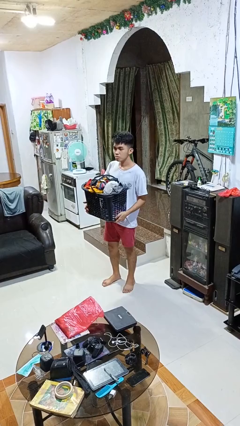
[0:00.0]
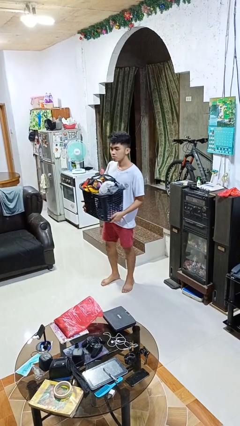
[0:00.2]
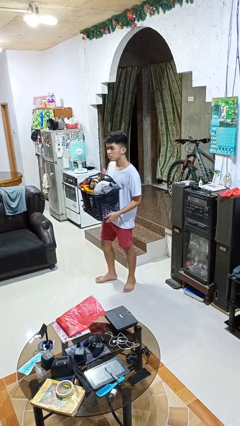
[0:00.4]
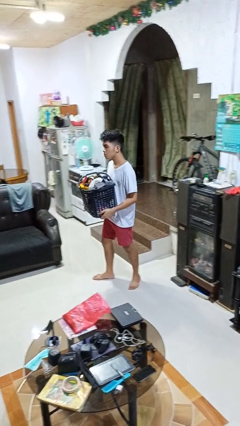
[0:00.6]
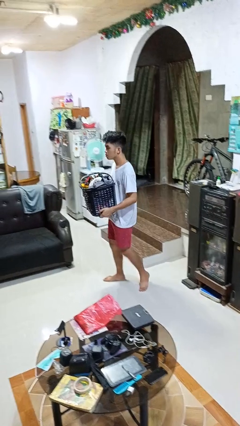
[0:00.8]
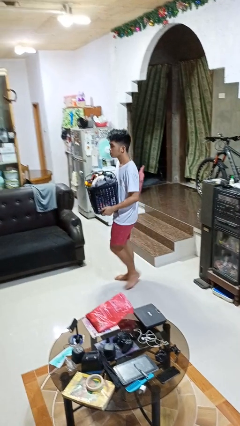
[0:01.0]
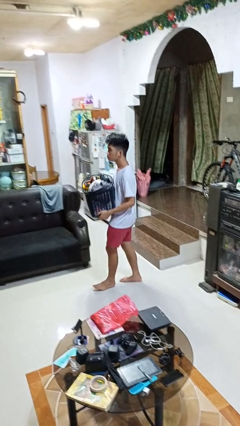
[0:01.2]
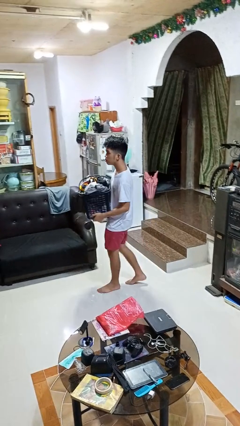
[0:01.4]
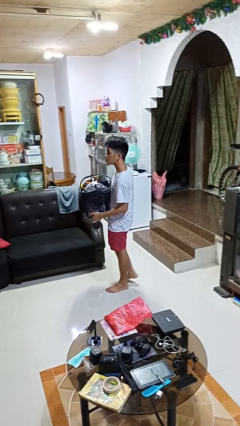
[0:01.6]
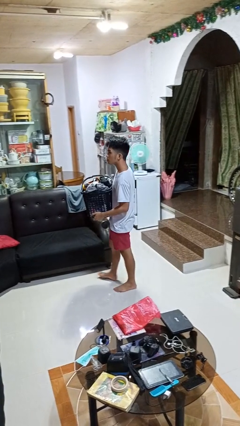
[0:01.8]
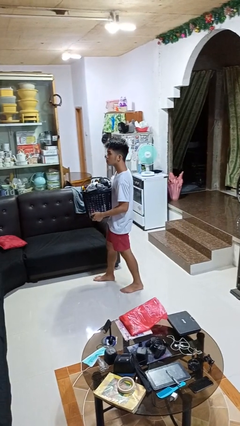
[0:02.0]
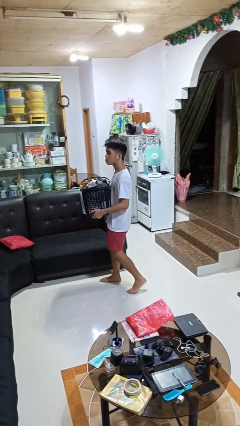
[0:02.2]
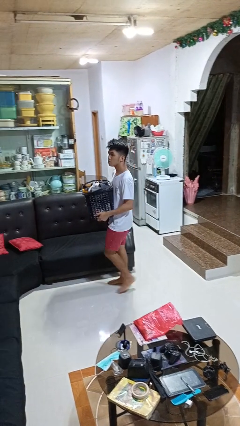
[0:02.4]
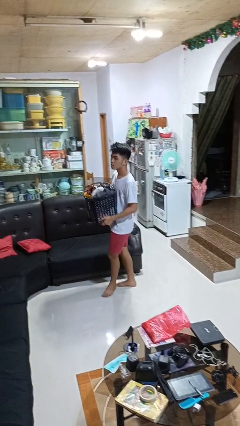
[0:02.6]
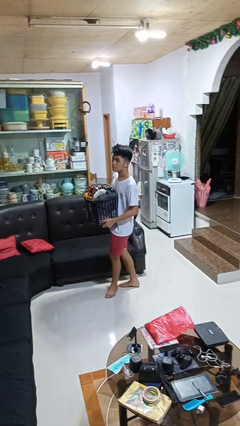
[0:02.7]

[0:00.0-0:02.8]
person carries laundry basket

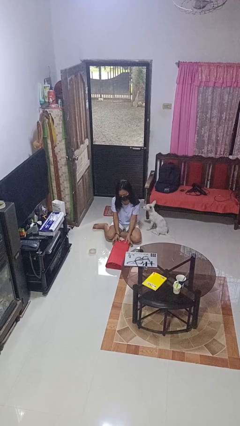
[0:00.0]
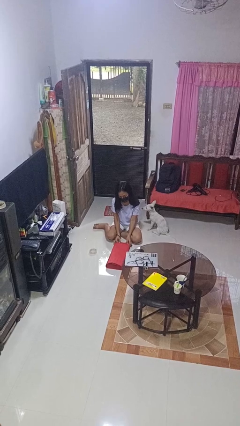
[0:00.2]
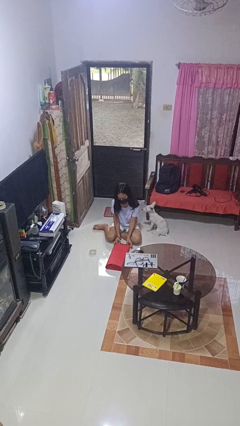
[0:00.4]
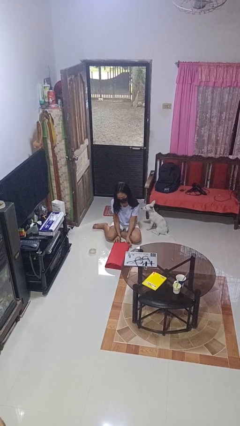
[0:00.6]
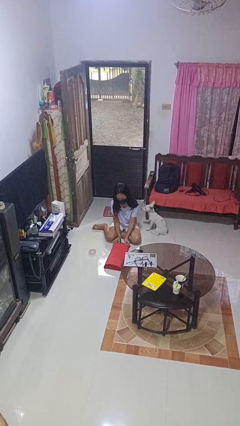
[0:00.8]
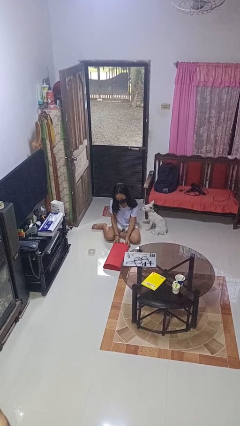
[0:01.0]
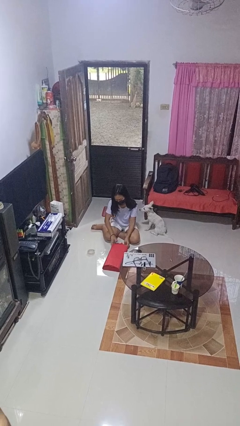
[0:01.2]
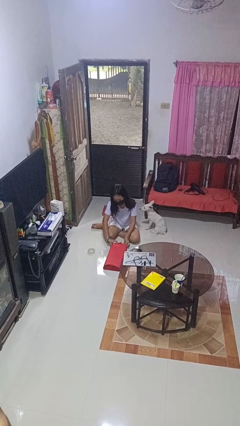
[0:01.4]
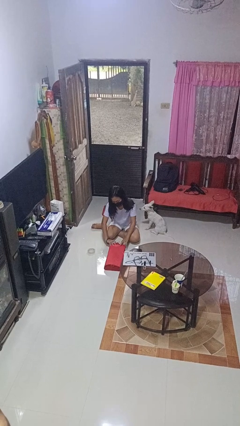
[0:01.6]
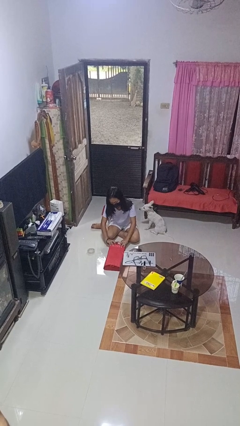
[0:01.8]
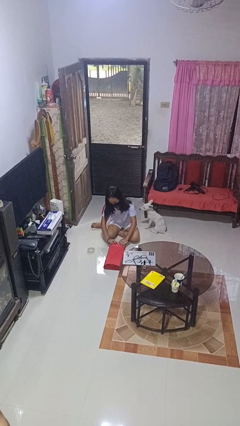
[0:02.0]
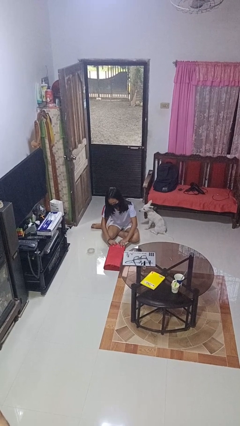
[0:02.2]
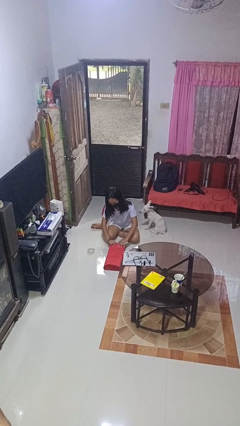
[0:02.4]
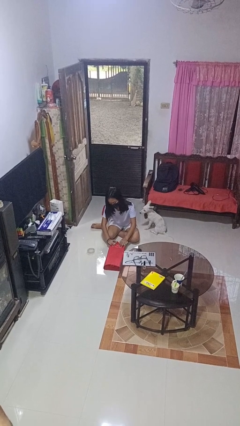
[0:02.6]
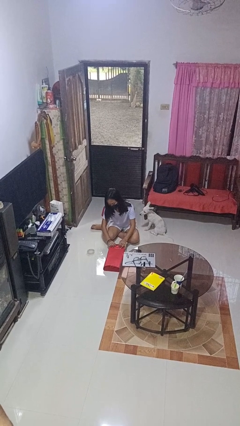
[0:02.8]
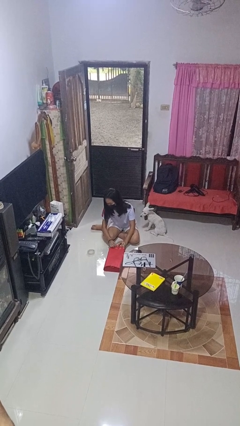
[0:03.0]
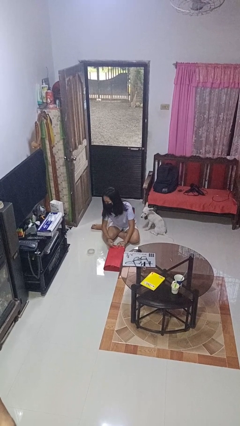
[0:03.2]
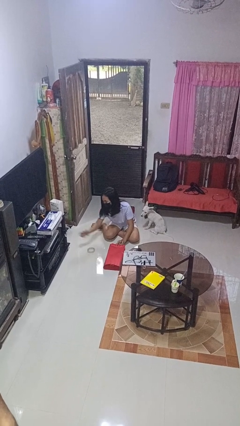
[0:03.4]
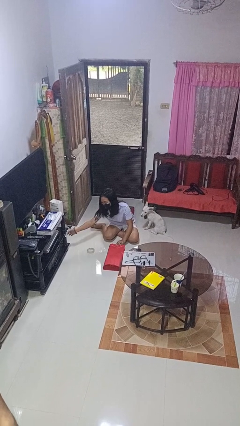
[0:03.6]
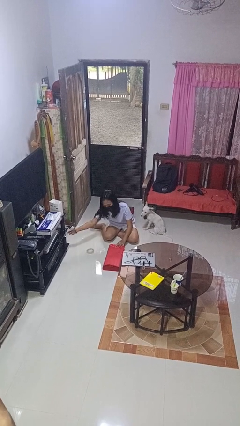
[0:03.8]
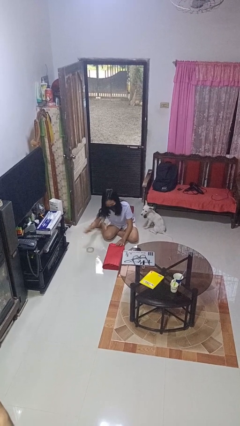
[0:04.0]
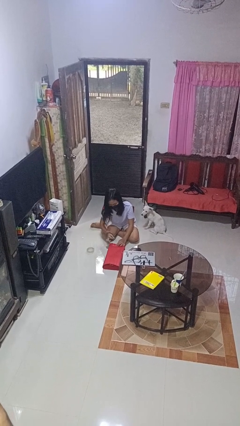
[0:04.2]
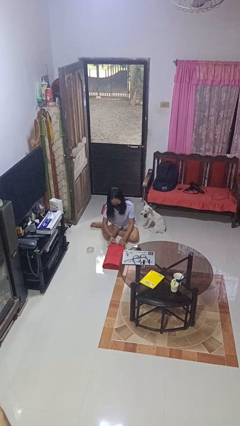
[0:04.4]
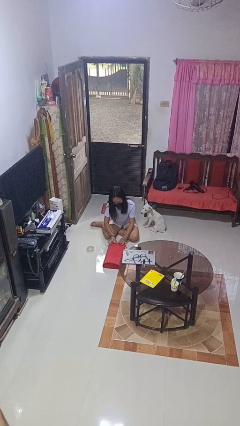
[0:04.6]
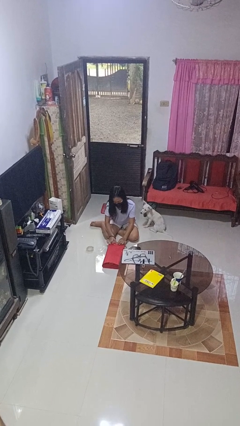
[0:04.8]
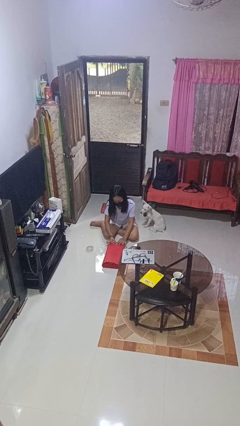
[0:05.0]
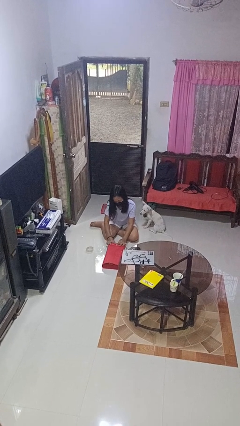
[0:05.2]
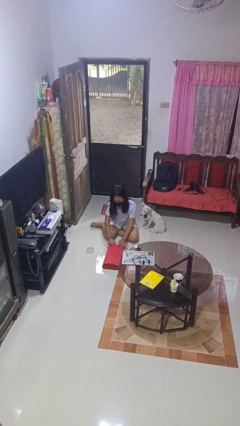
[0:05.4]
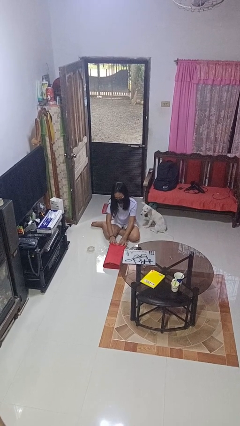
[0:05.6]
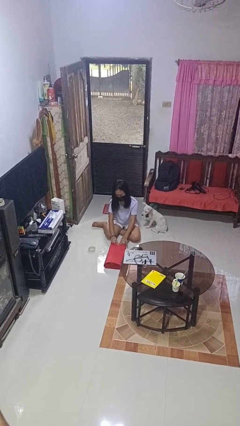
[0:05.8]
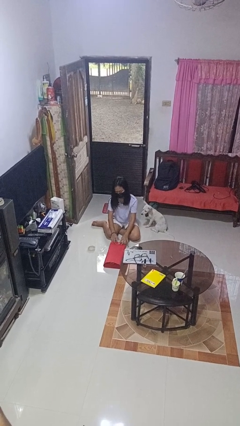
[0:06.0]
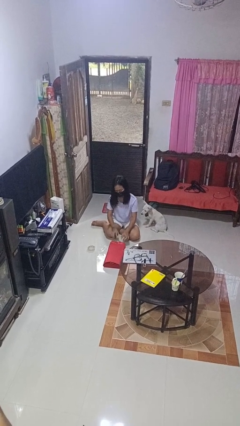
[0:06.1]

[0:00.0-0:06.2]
person wraps box

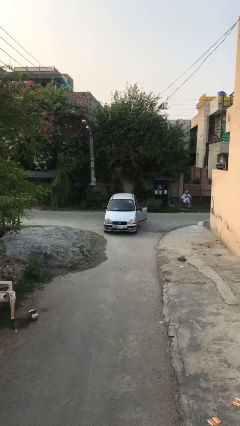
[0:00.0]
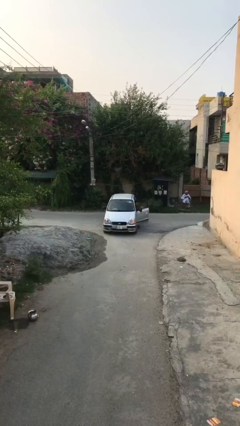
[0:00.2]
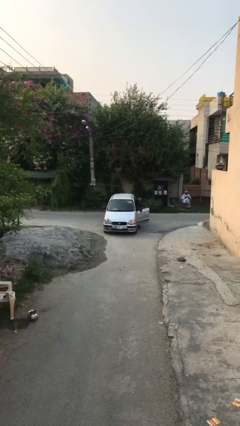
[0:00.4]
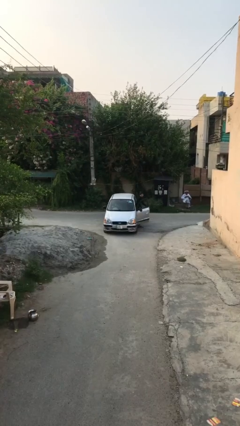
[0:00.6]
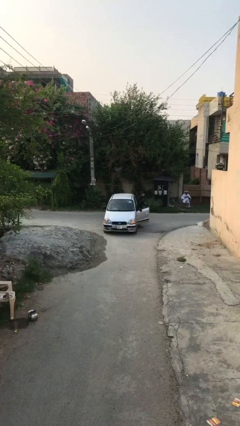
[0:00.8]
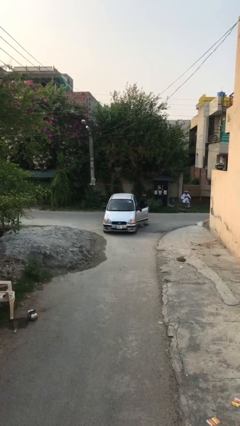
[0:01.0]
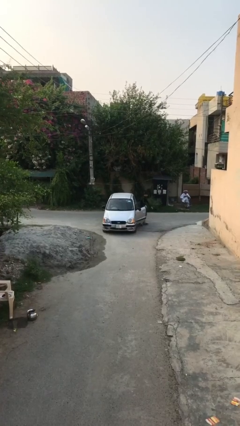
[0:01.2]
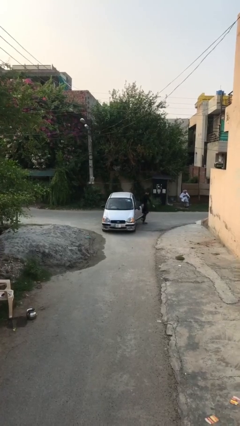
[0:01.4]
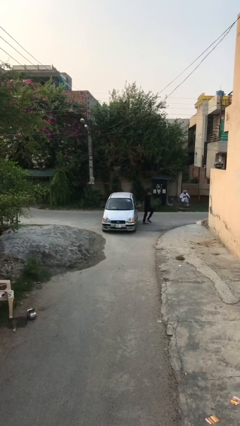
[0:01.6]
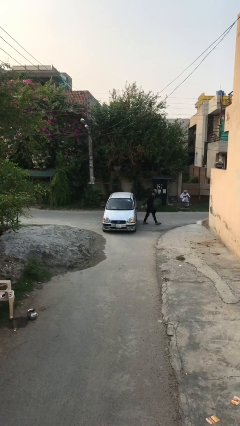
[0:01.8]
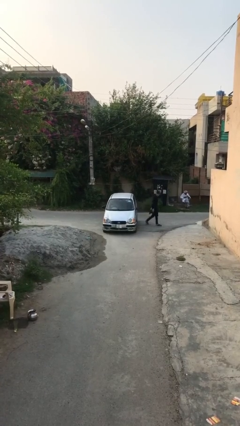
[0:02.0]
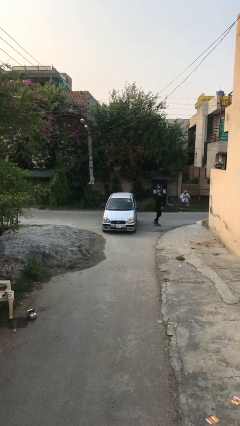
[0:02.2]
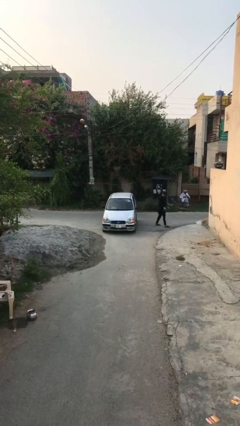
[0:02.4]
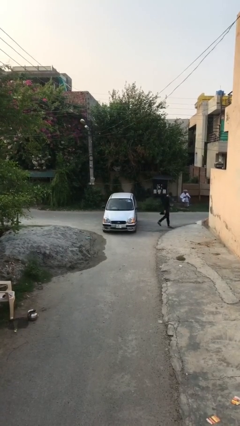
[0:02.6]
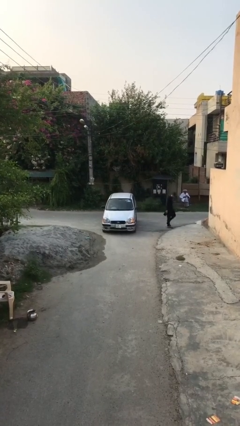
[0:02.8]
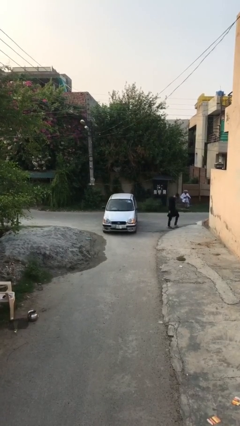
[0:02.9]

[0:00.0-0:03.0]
car drops off person

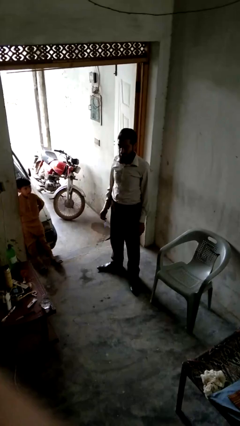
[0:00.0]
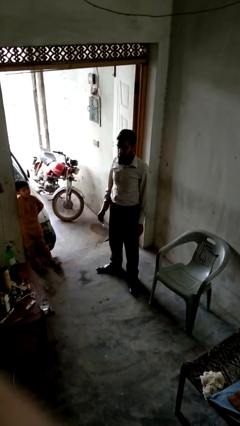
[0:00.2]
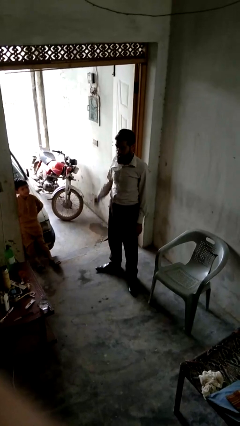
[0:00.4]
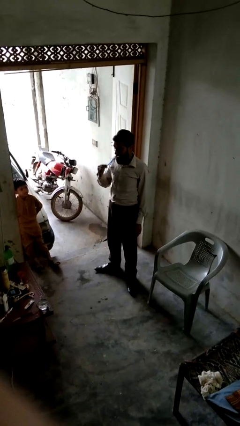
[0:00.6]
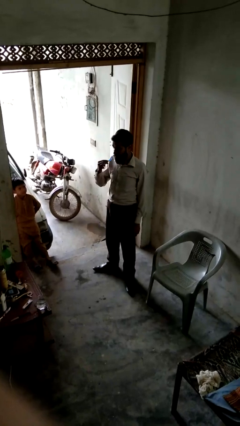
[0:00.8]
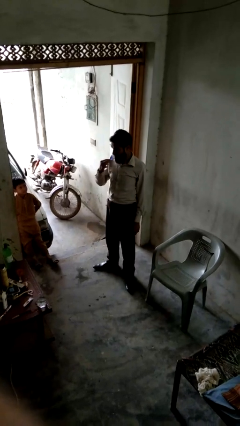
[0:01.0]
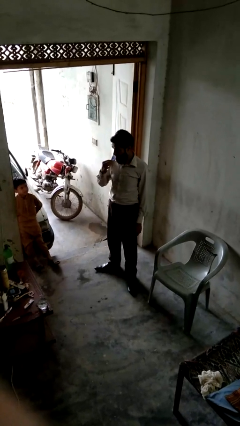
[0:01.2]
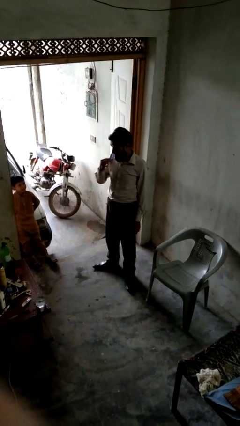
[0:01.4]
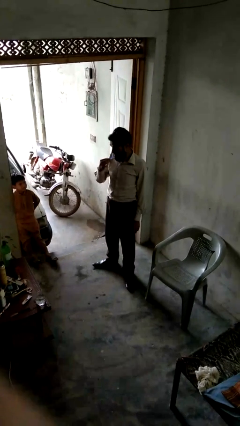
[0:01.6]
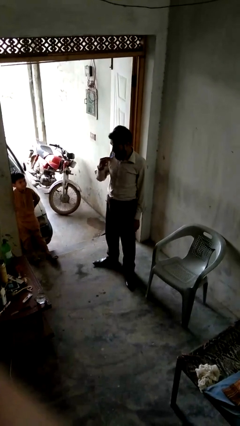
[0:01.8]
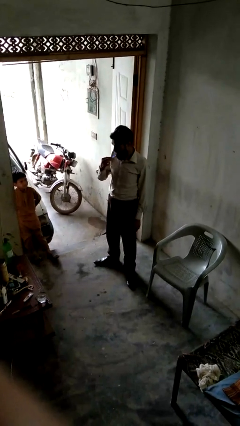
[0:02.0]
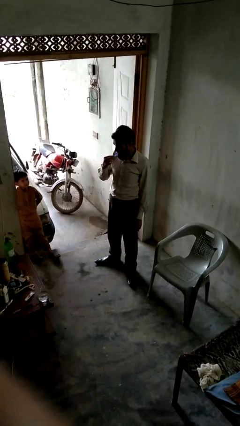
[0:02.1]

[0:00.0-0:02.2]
person brushes teeth

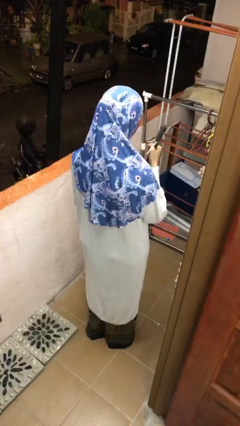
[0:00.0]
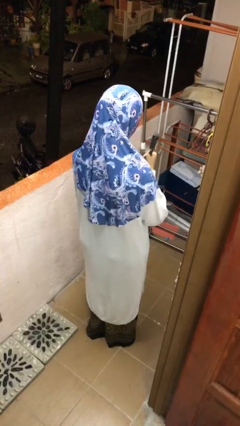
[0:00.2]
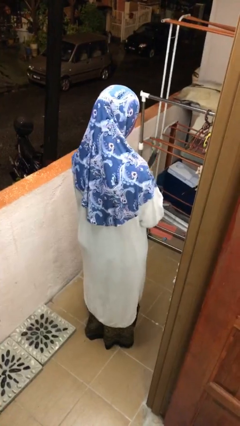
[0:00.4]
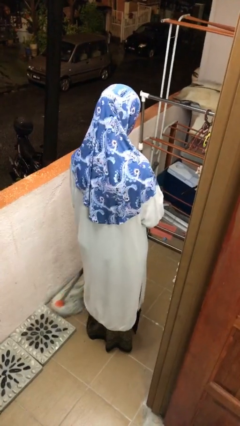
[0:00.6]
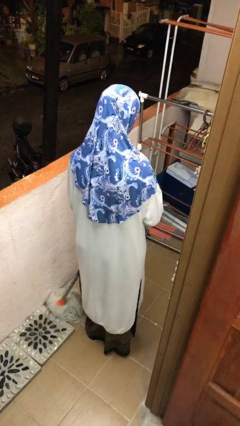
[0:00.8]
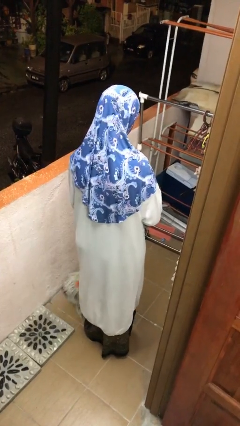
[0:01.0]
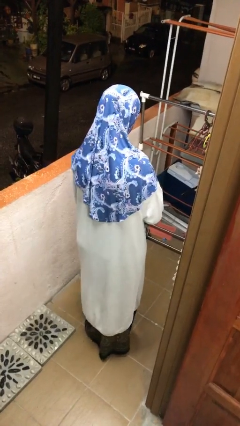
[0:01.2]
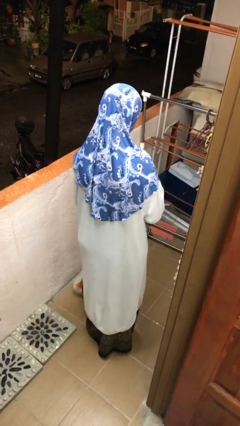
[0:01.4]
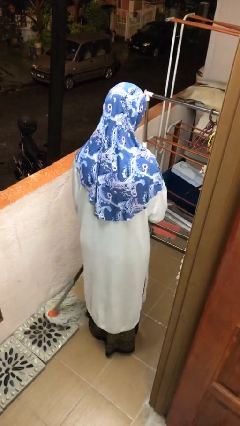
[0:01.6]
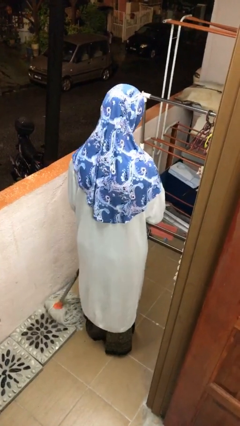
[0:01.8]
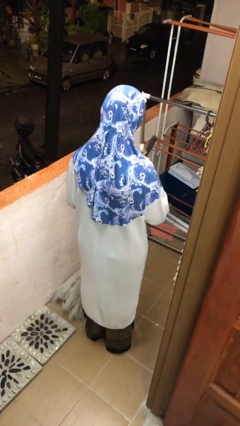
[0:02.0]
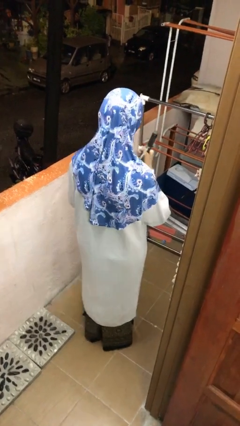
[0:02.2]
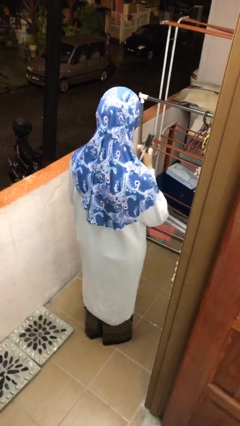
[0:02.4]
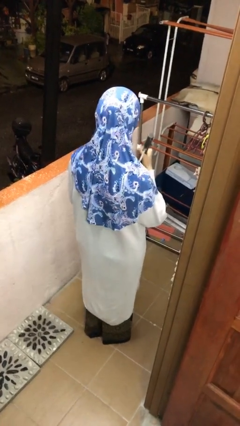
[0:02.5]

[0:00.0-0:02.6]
person mops

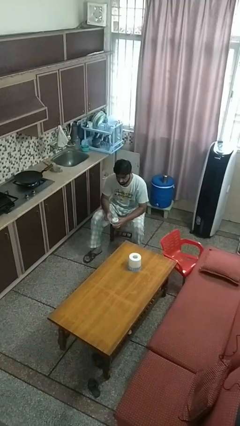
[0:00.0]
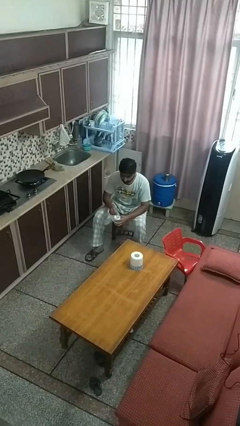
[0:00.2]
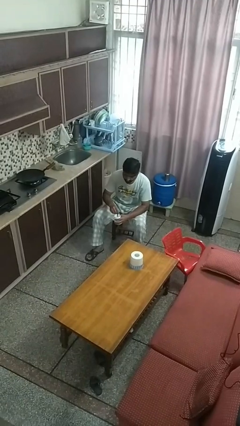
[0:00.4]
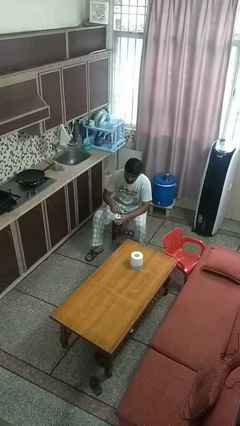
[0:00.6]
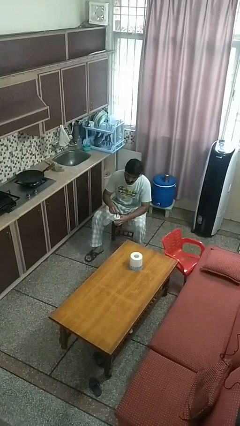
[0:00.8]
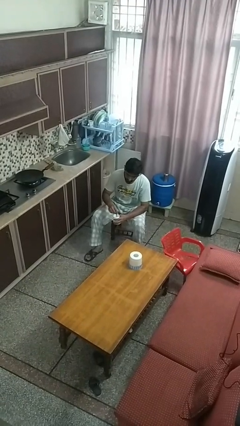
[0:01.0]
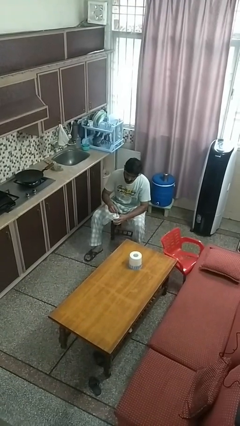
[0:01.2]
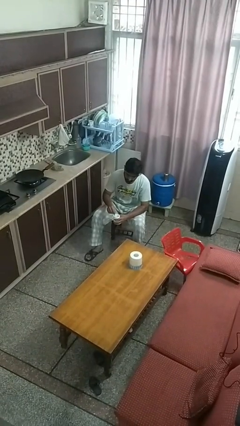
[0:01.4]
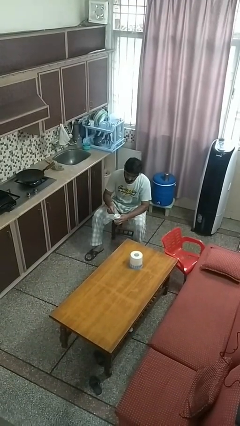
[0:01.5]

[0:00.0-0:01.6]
person stirs mug
